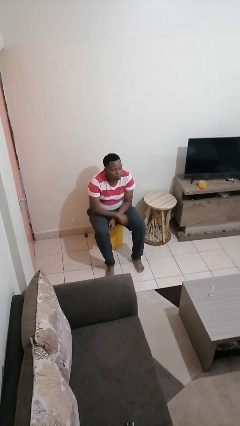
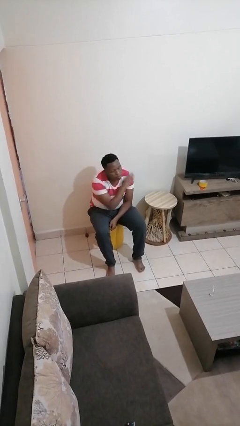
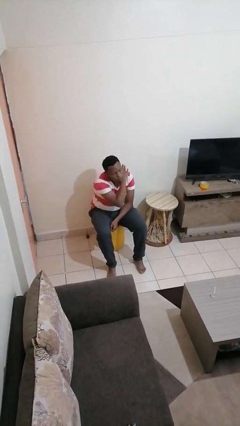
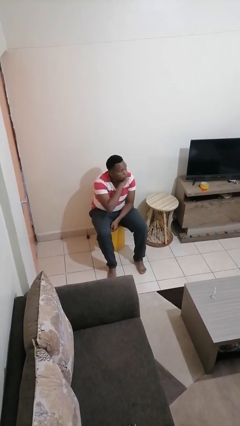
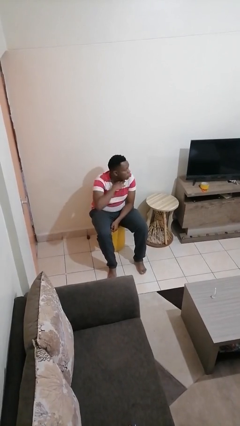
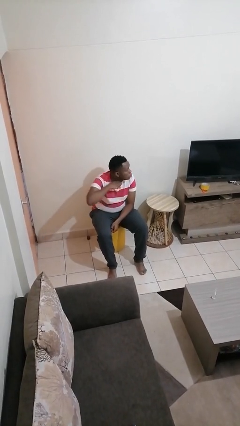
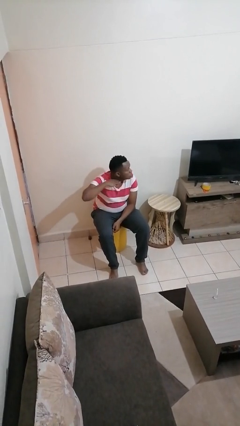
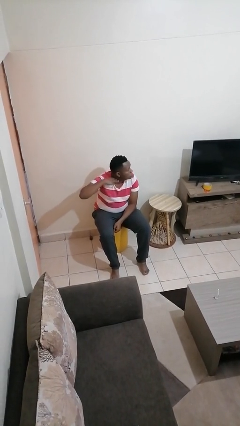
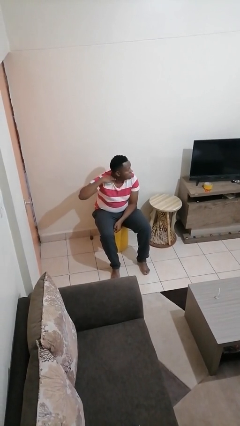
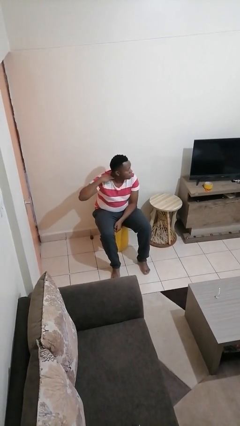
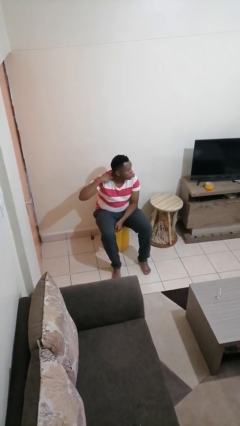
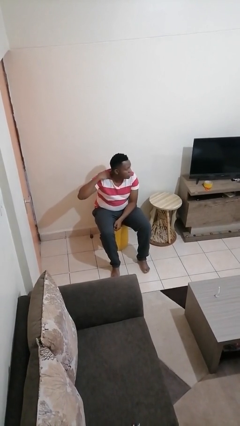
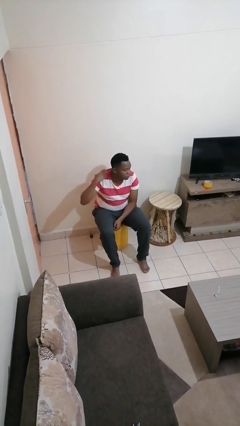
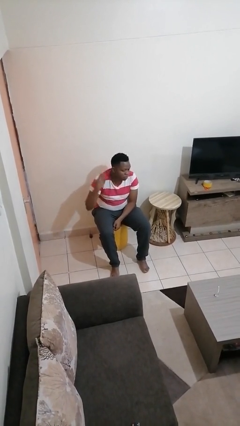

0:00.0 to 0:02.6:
person gestures cut

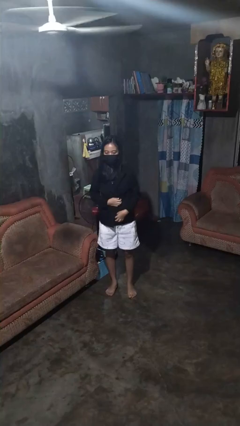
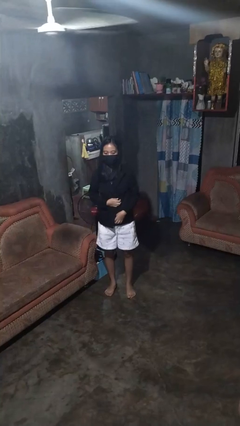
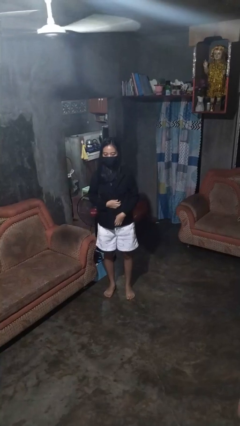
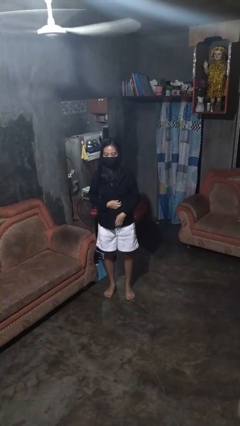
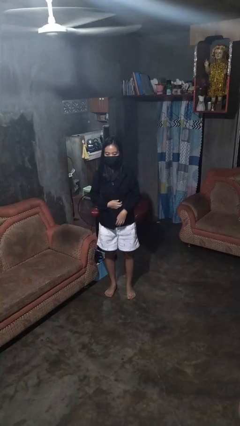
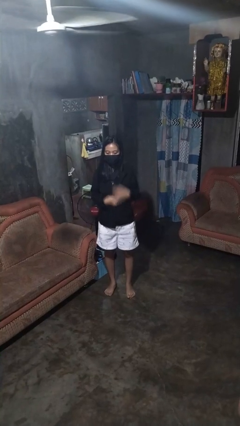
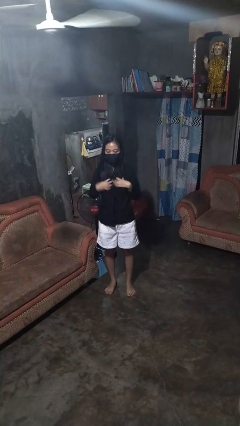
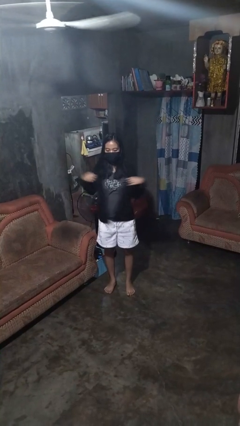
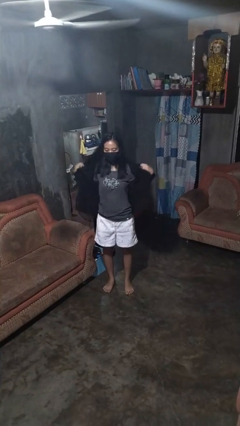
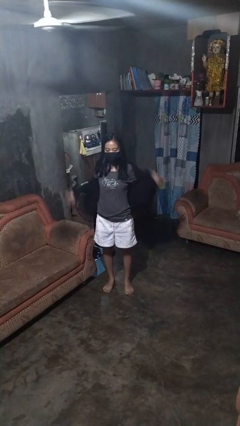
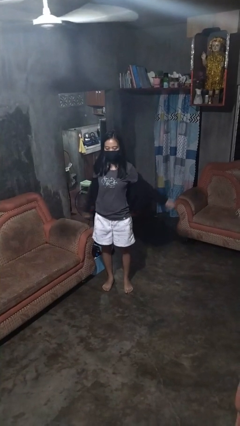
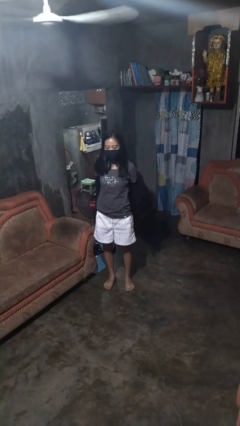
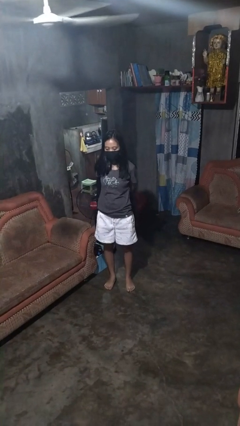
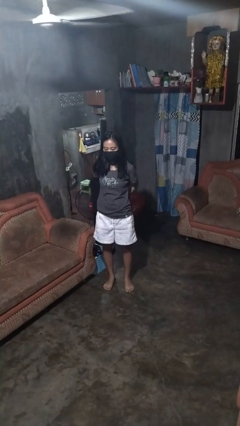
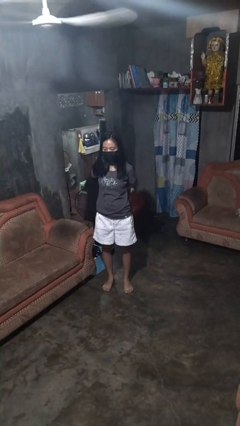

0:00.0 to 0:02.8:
person takes off shirt

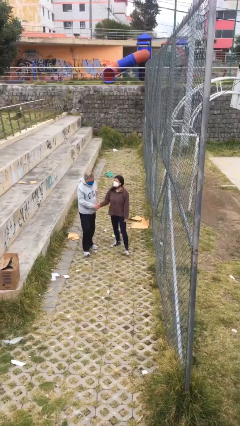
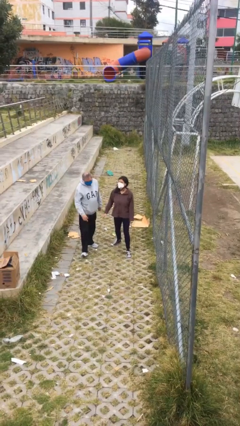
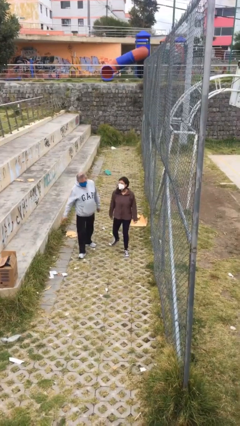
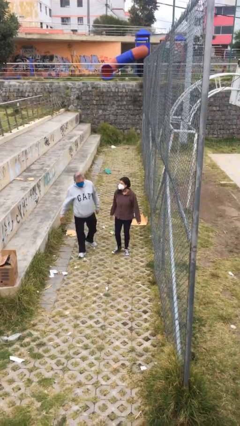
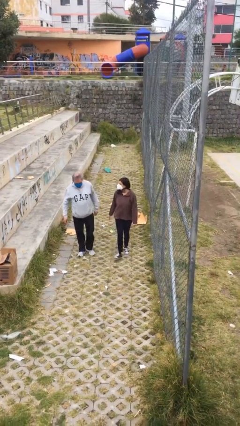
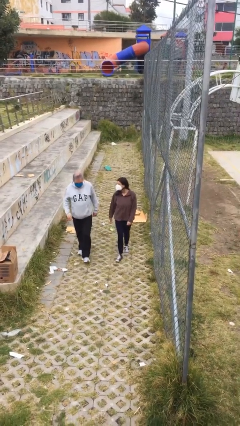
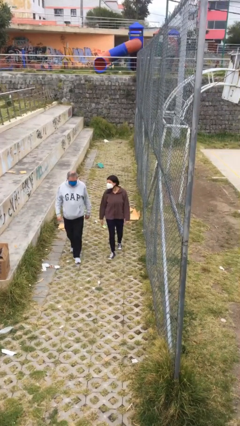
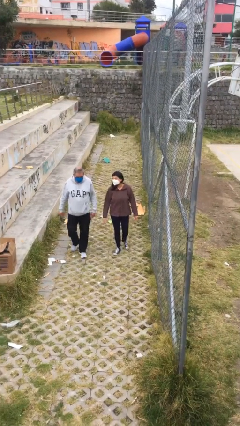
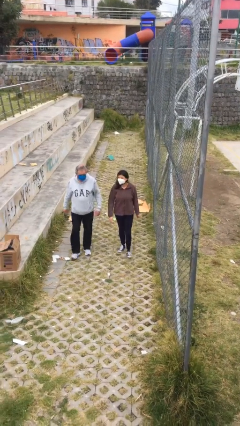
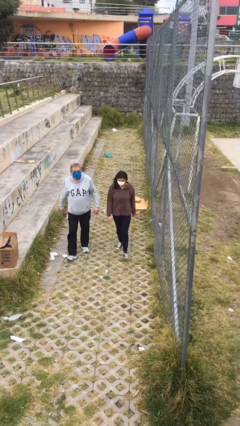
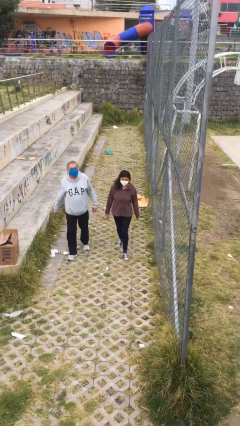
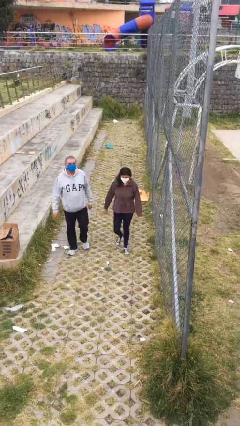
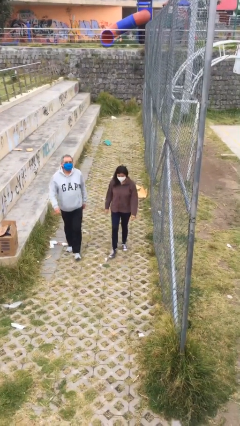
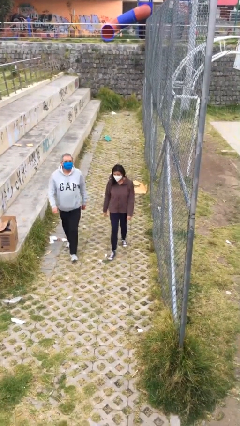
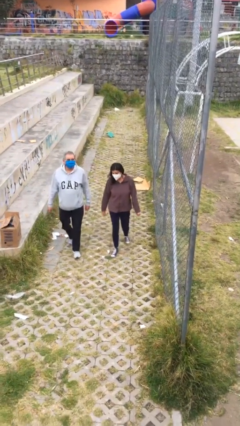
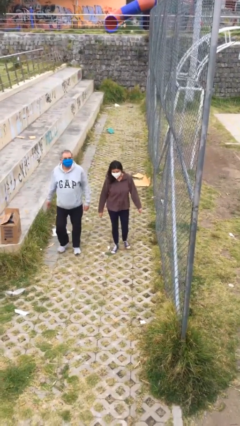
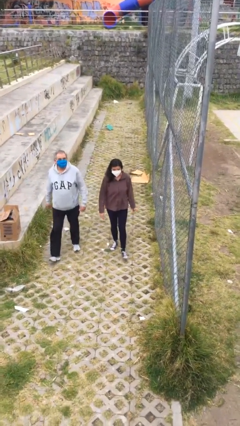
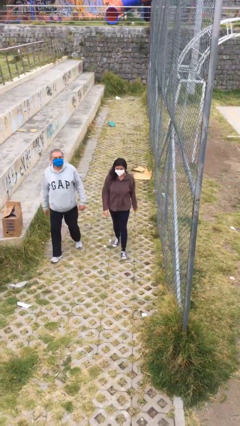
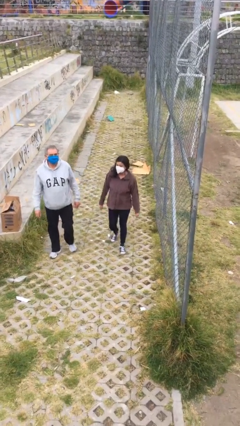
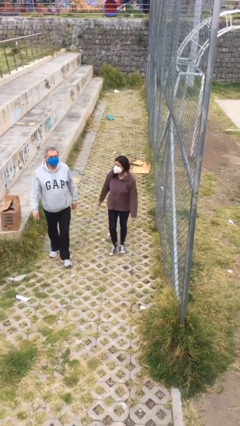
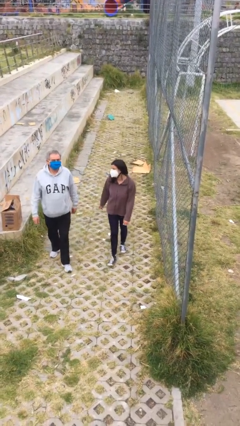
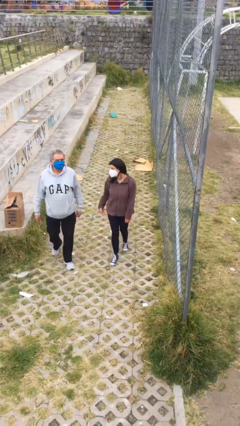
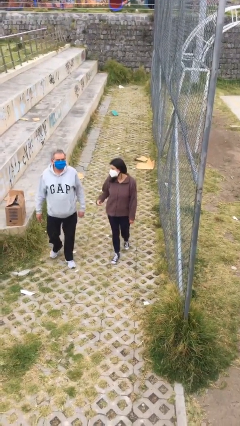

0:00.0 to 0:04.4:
person talks to person

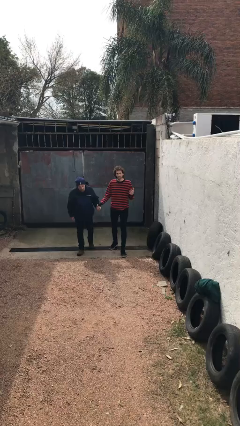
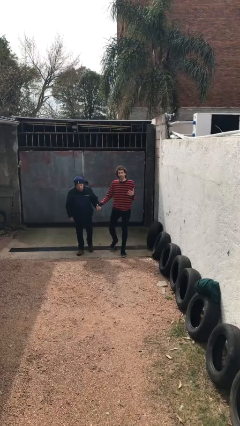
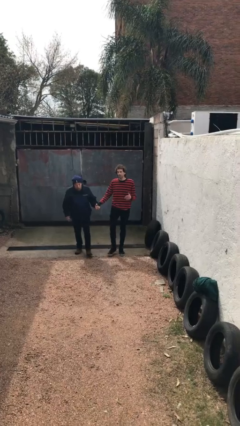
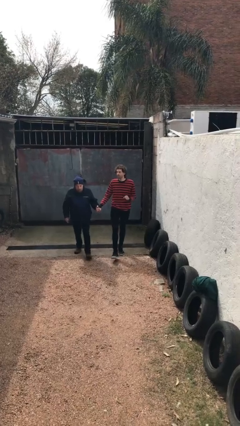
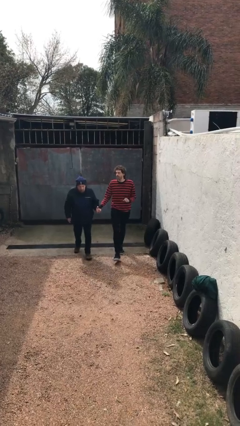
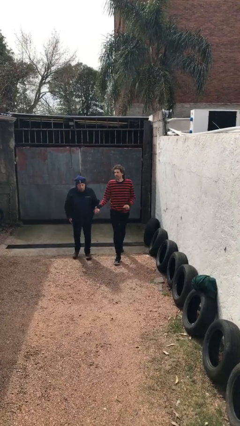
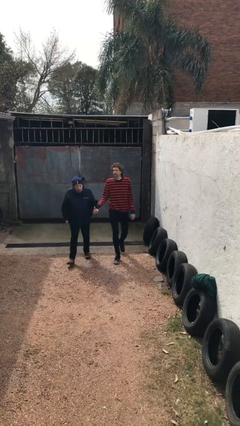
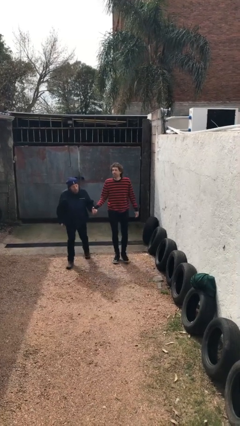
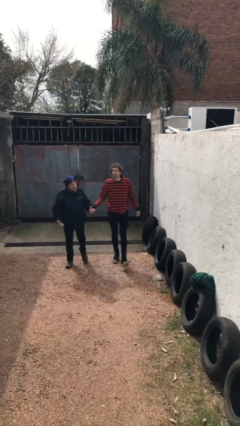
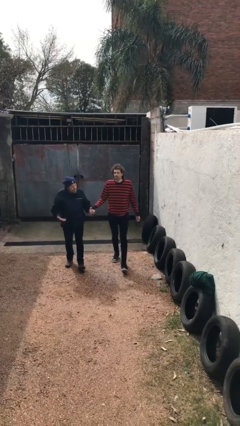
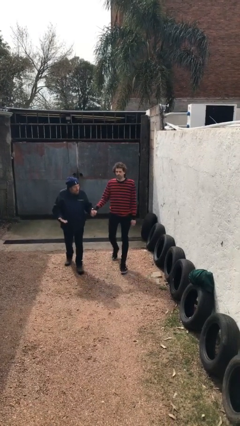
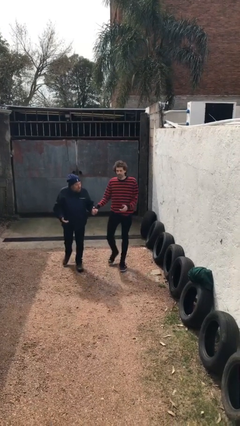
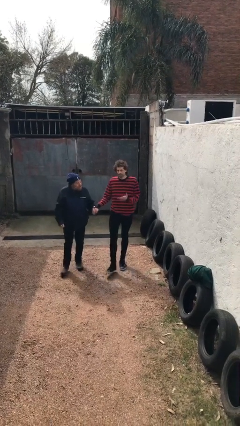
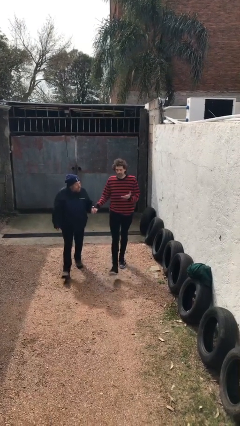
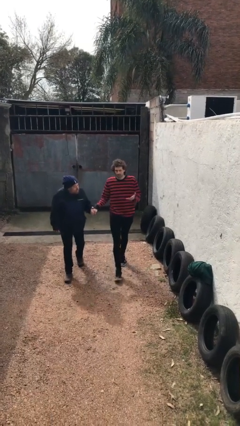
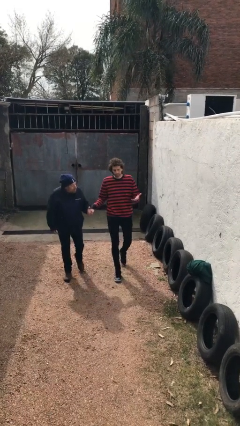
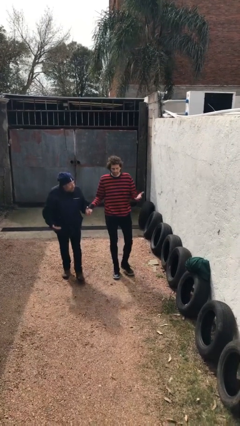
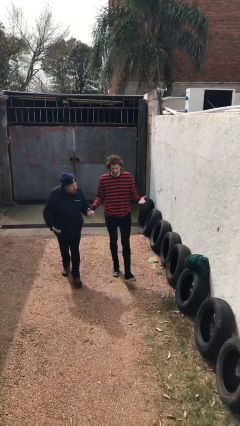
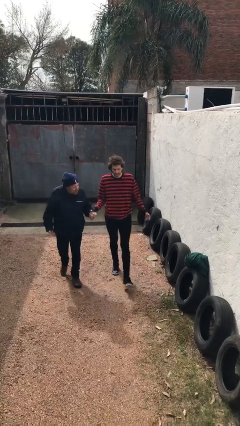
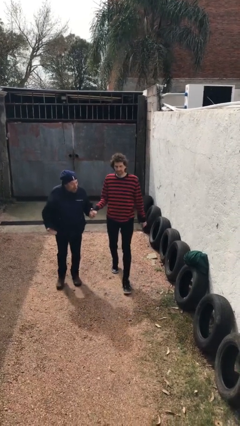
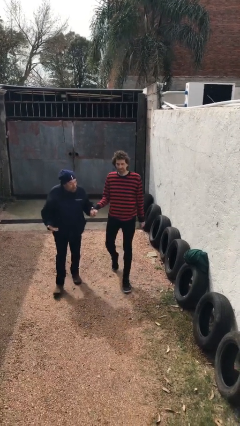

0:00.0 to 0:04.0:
person holds hand

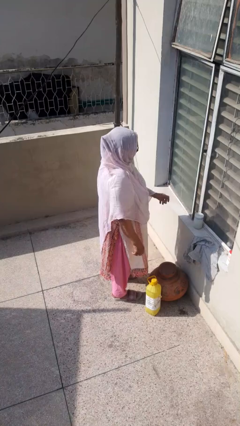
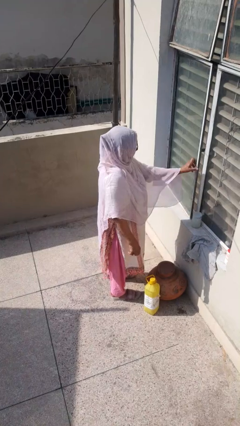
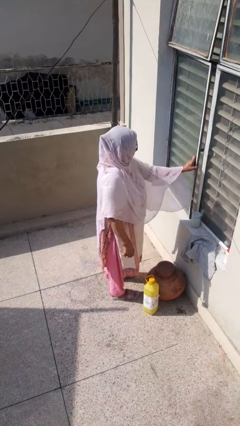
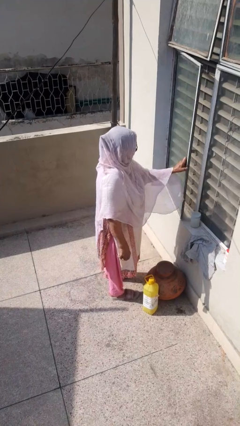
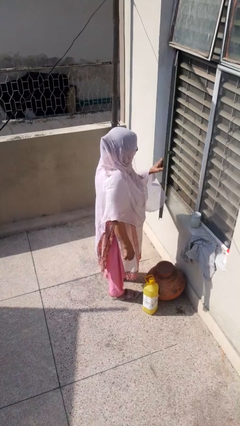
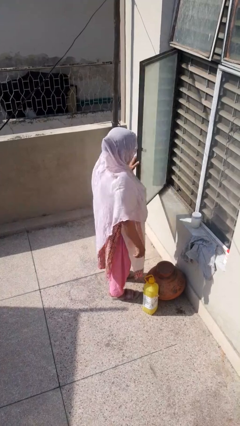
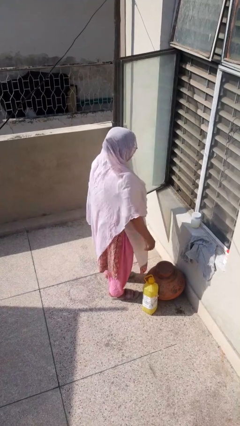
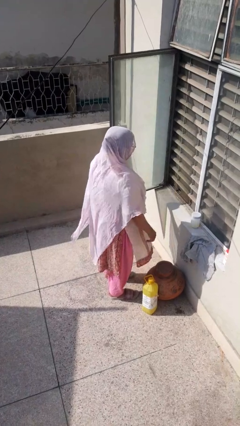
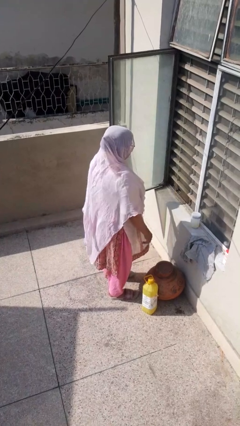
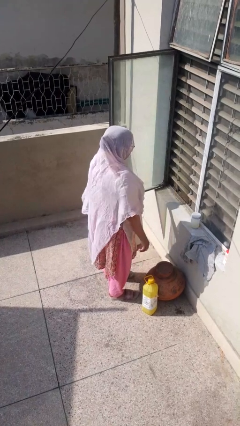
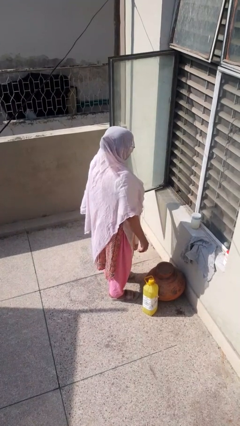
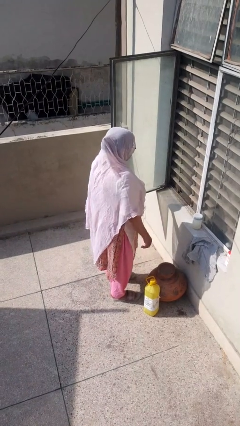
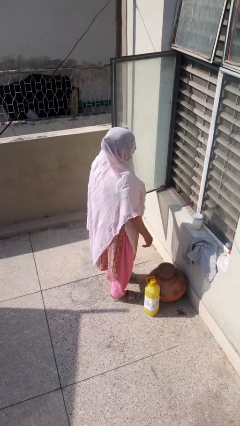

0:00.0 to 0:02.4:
person opens home window

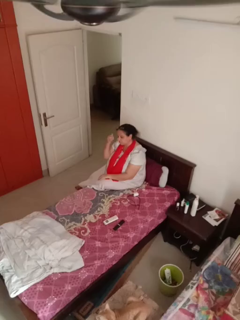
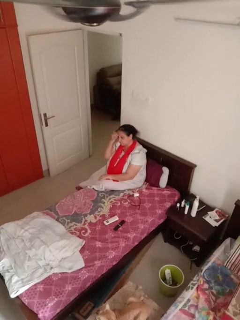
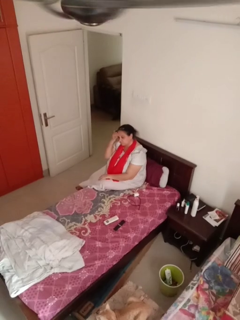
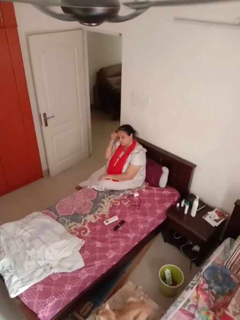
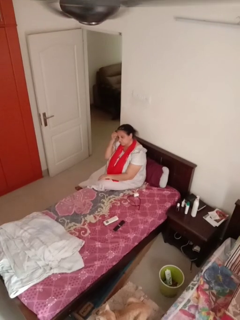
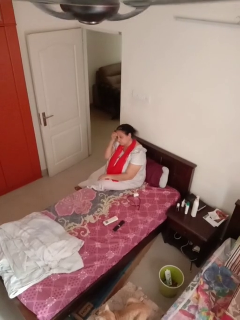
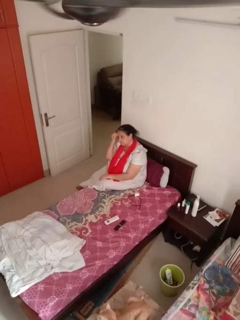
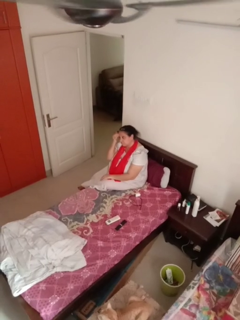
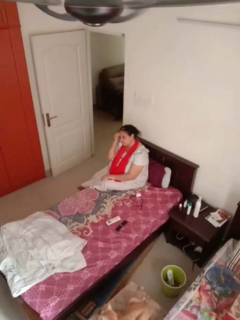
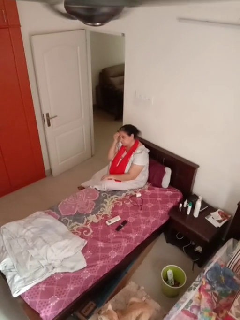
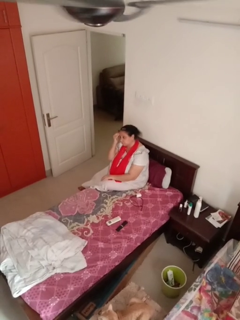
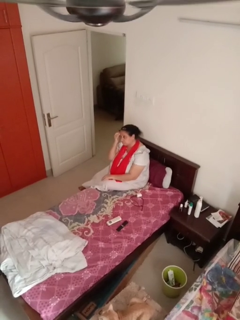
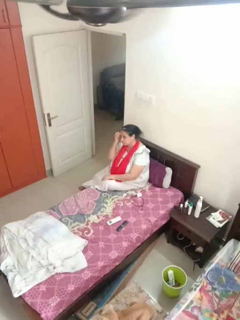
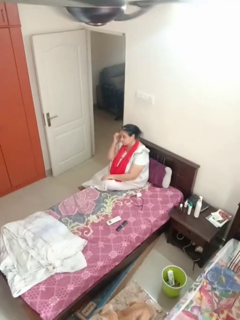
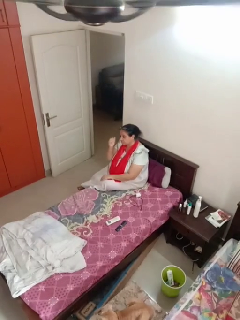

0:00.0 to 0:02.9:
person scratches face
